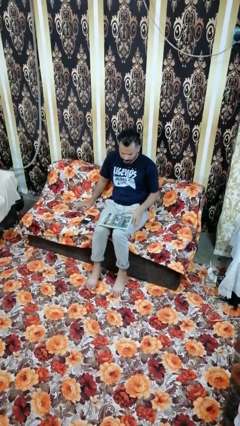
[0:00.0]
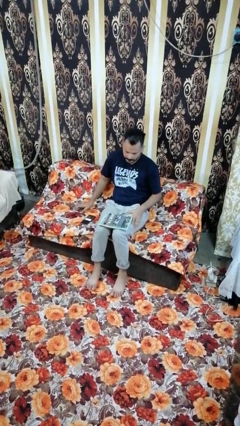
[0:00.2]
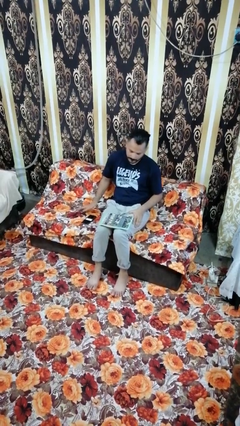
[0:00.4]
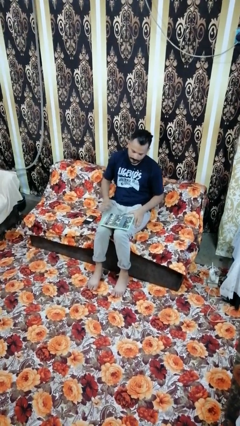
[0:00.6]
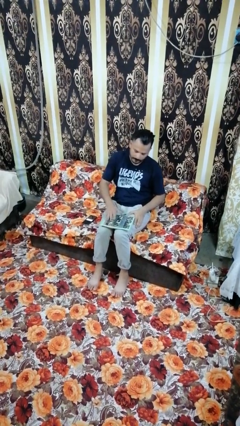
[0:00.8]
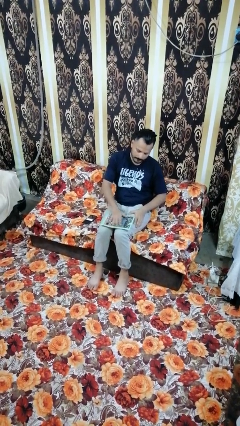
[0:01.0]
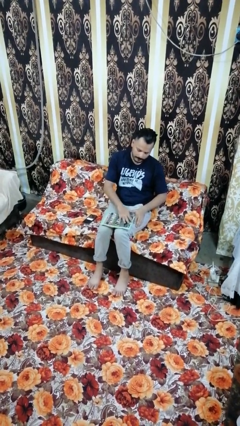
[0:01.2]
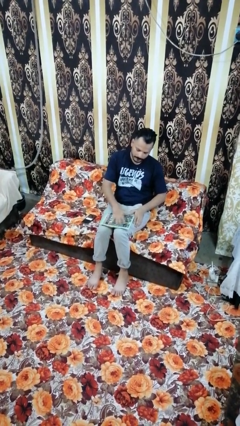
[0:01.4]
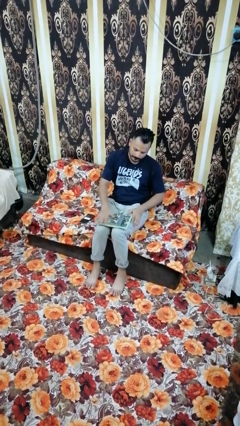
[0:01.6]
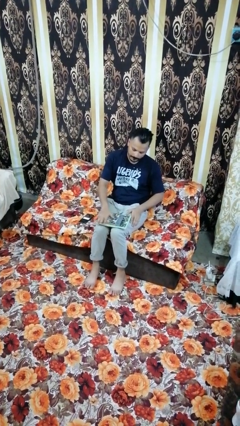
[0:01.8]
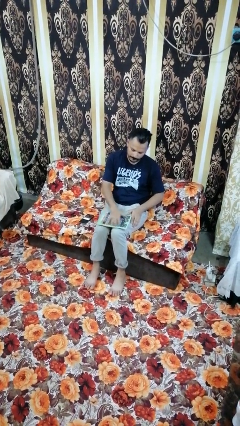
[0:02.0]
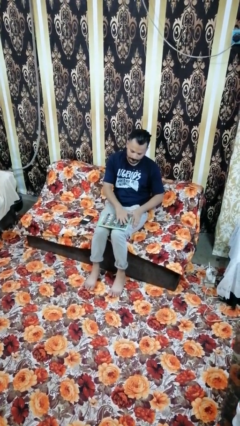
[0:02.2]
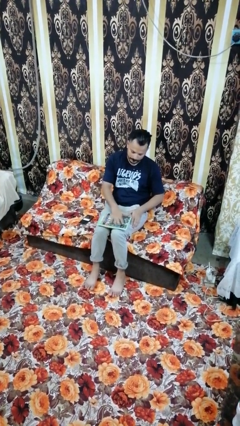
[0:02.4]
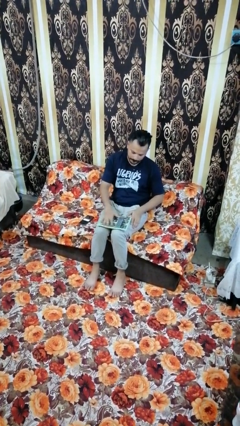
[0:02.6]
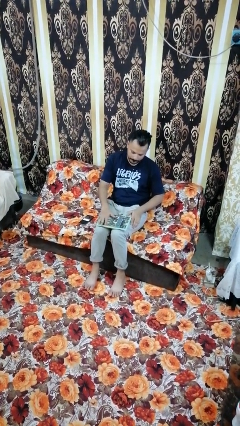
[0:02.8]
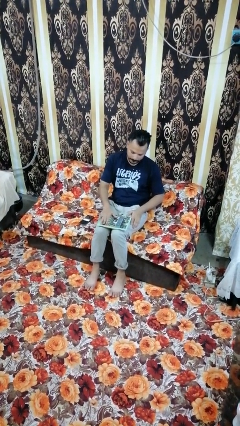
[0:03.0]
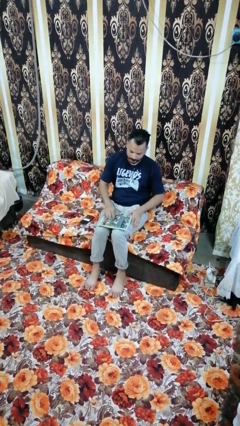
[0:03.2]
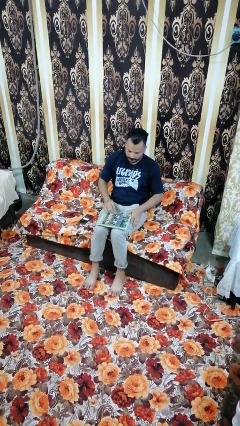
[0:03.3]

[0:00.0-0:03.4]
person waves hand over object

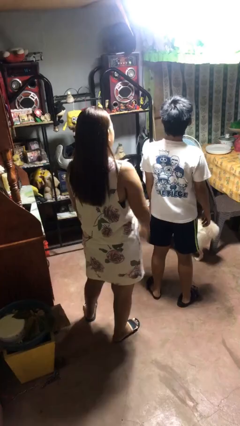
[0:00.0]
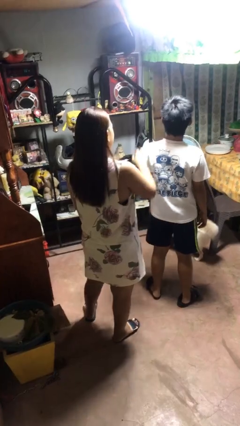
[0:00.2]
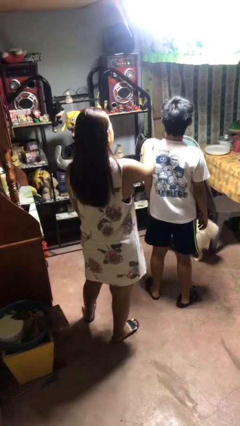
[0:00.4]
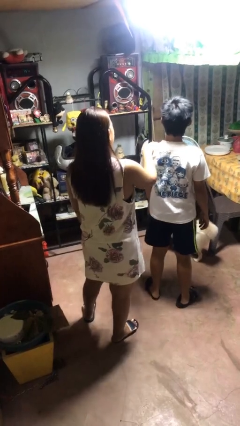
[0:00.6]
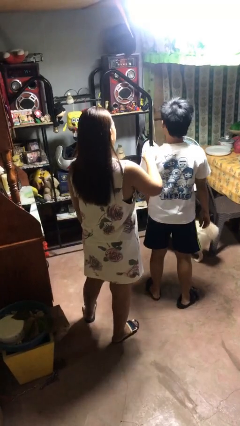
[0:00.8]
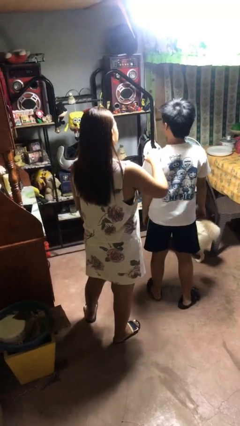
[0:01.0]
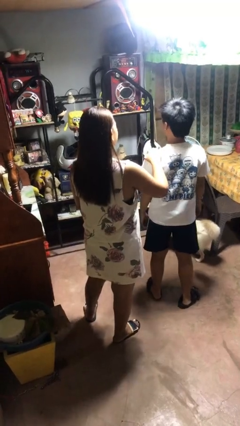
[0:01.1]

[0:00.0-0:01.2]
person grabs person by shoulder

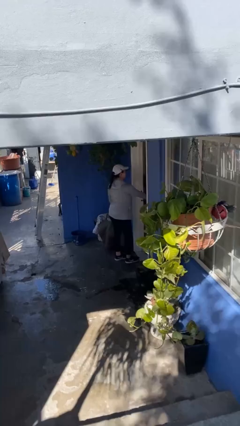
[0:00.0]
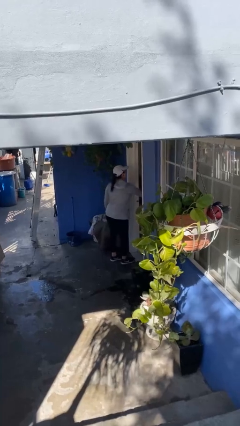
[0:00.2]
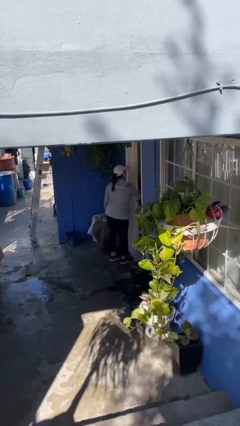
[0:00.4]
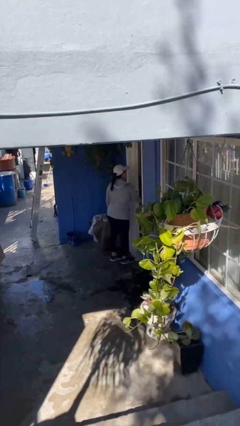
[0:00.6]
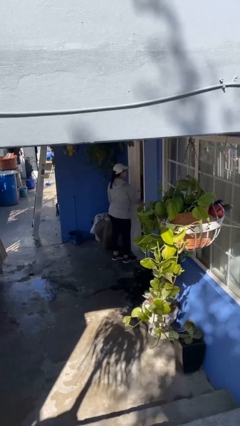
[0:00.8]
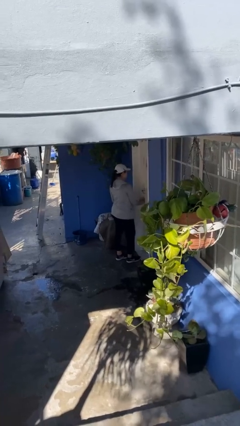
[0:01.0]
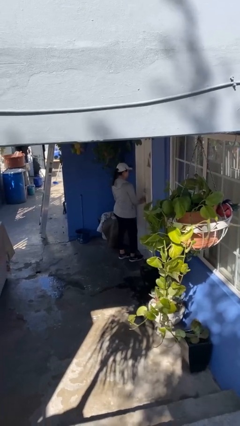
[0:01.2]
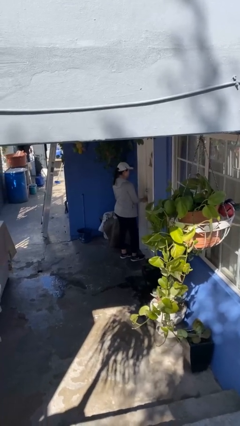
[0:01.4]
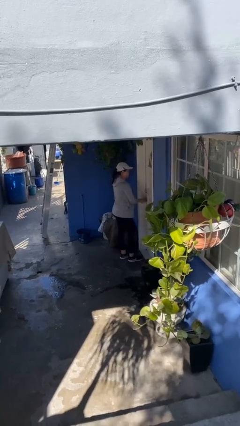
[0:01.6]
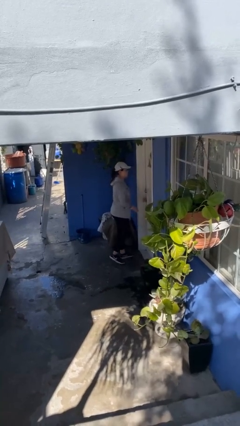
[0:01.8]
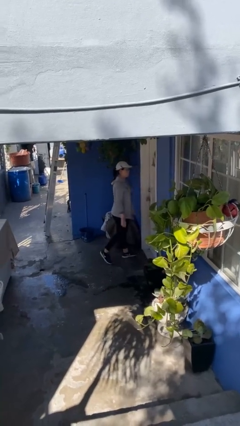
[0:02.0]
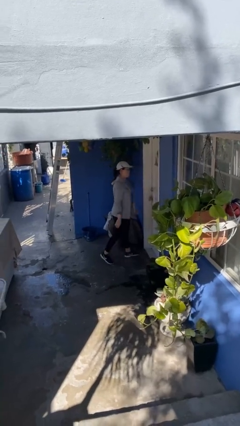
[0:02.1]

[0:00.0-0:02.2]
person closes facility door

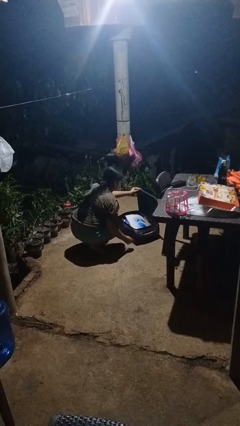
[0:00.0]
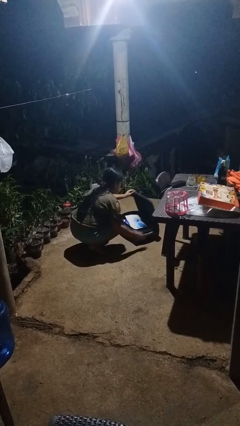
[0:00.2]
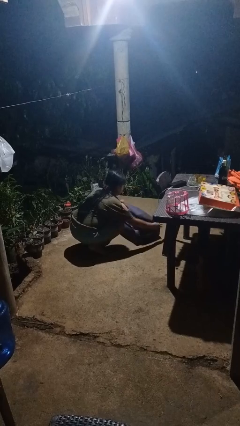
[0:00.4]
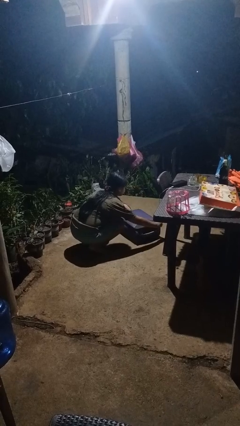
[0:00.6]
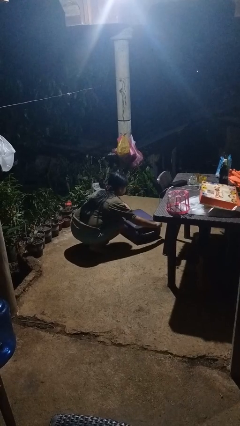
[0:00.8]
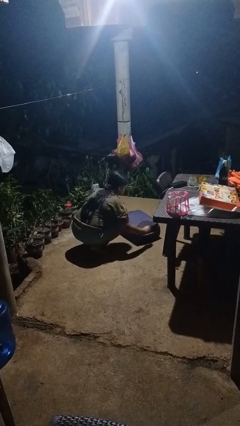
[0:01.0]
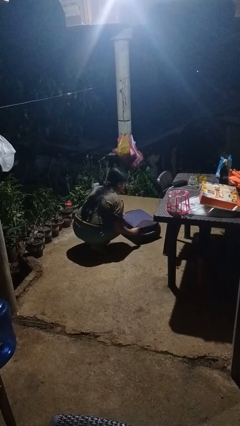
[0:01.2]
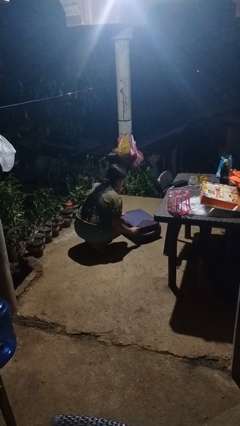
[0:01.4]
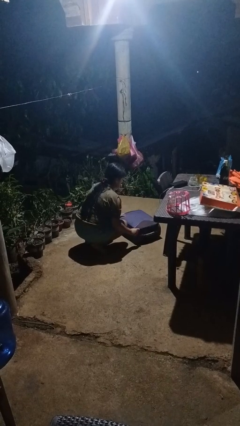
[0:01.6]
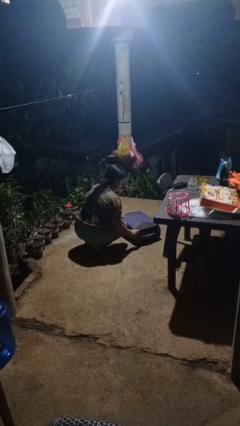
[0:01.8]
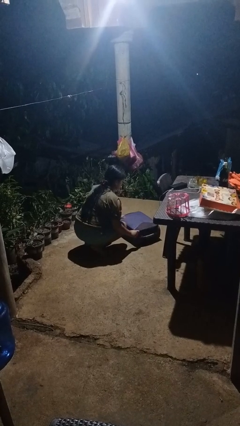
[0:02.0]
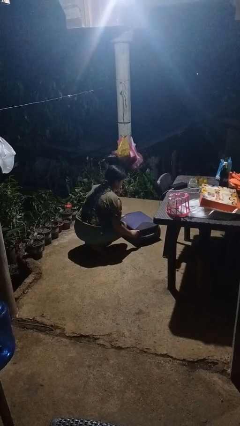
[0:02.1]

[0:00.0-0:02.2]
person closes suitcase

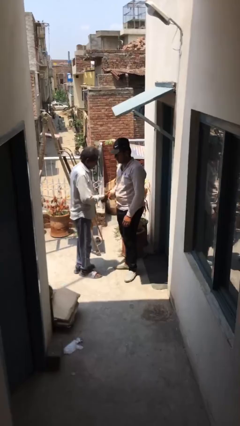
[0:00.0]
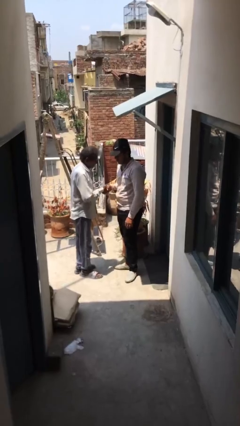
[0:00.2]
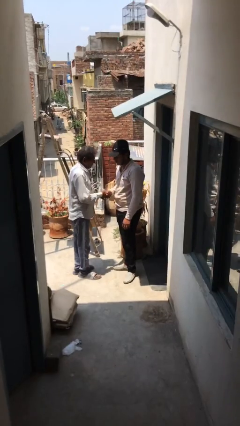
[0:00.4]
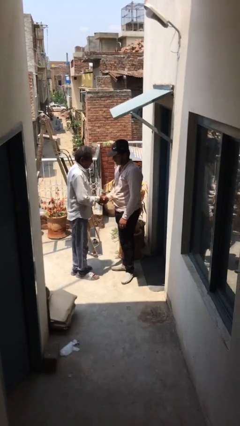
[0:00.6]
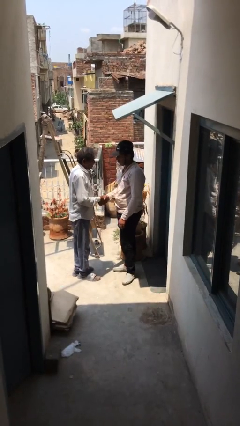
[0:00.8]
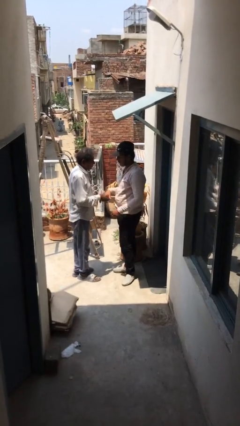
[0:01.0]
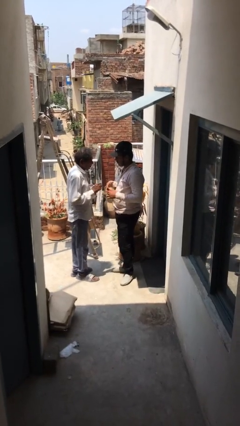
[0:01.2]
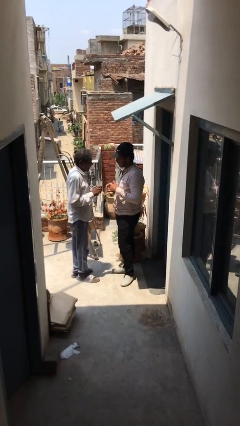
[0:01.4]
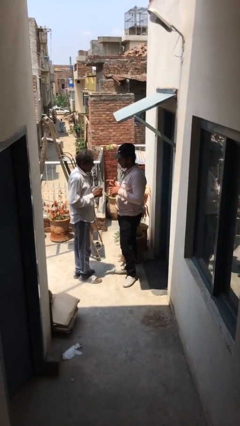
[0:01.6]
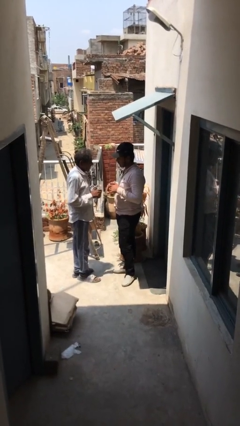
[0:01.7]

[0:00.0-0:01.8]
person shakes hand

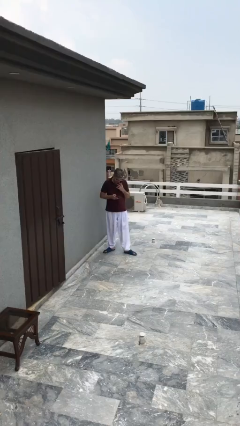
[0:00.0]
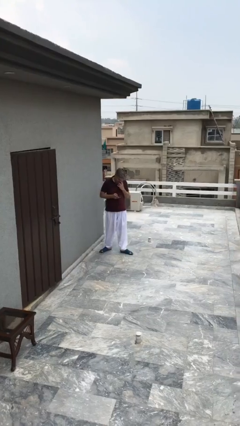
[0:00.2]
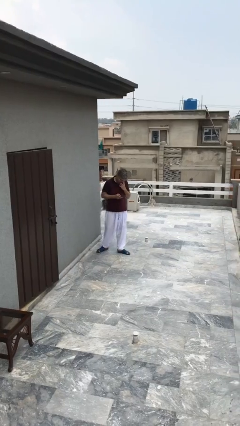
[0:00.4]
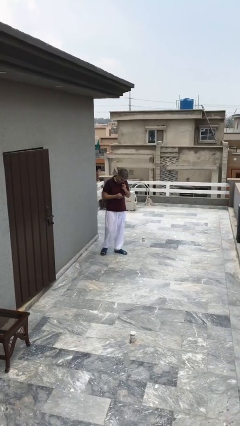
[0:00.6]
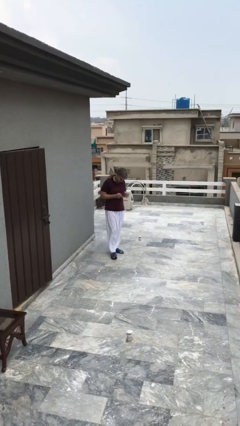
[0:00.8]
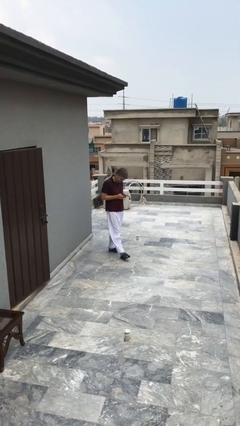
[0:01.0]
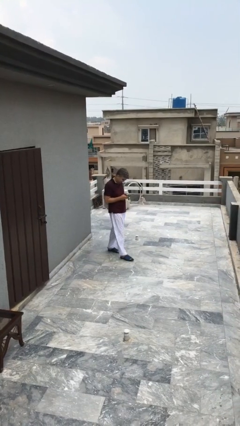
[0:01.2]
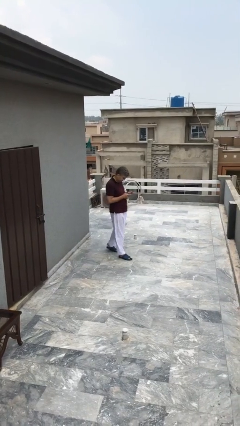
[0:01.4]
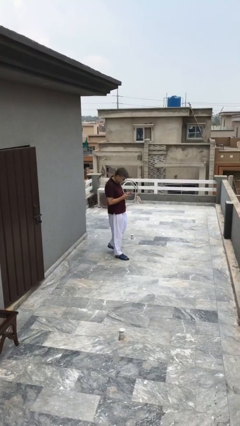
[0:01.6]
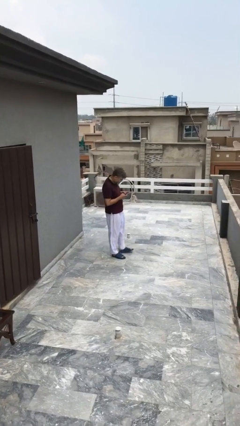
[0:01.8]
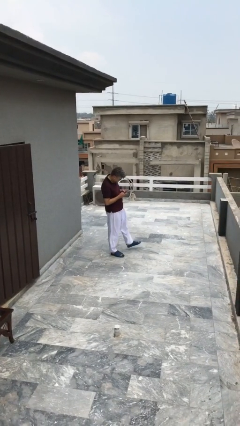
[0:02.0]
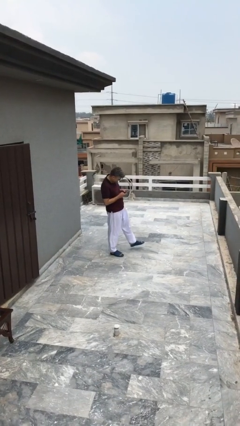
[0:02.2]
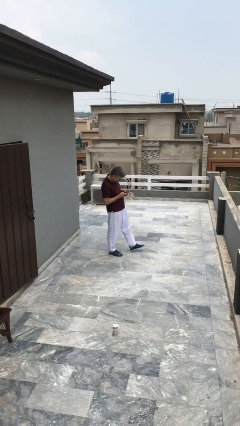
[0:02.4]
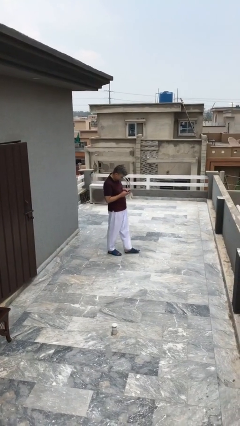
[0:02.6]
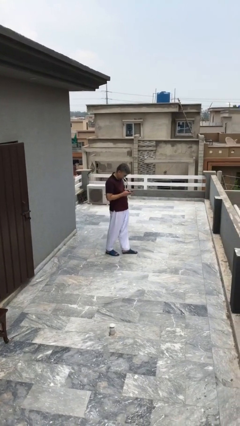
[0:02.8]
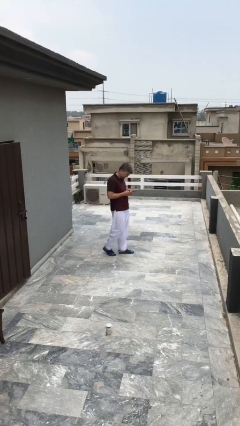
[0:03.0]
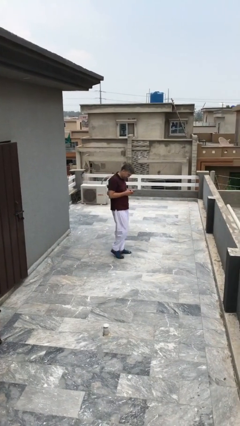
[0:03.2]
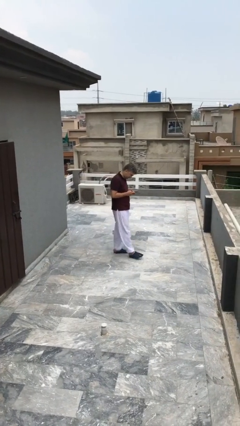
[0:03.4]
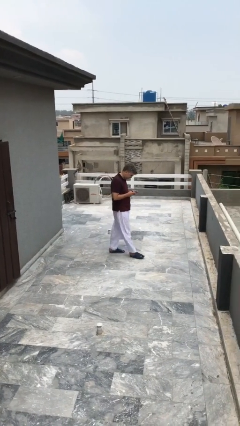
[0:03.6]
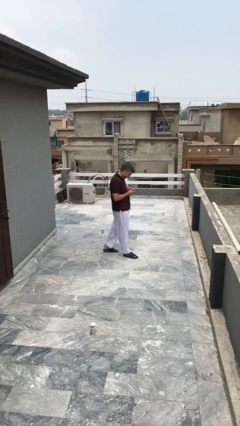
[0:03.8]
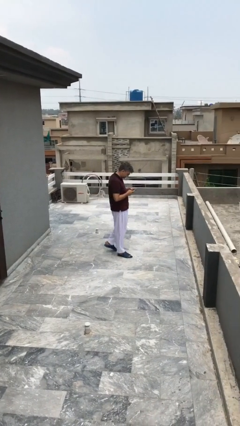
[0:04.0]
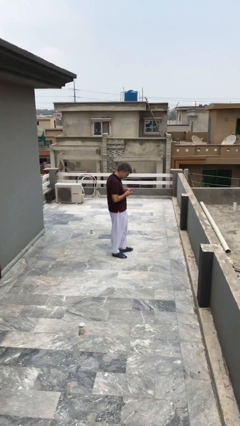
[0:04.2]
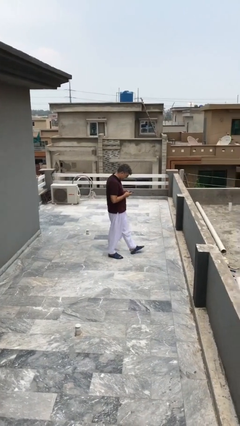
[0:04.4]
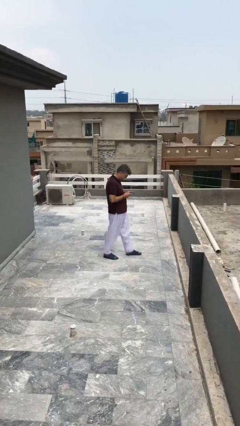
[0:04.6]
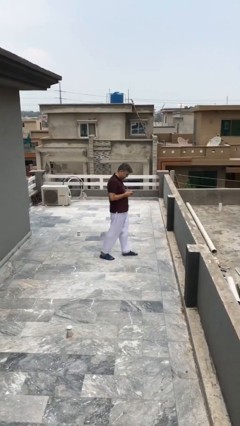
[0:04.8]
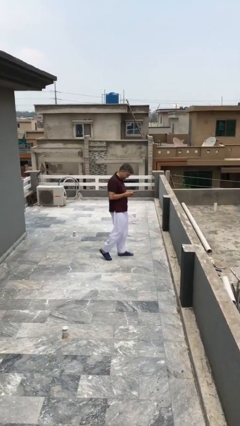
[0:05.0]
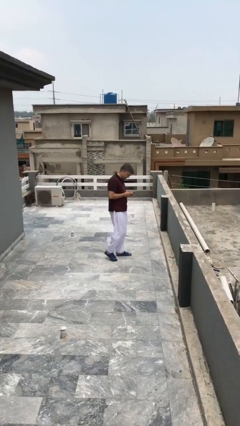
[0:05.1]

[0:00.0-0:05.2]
person texts on phone

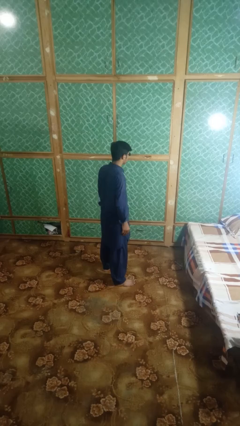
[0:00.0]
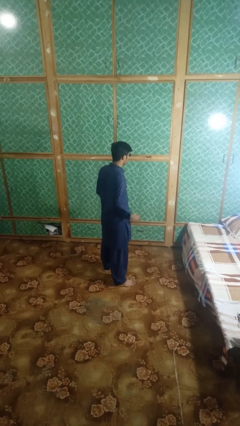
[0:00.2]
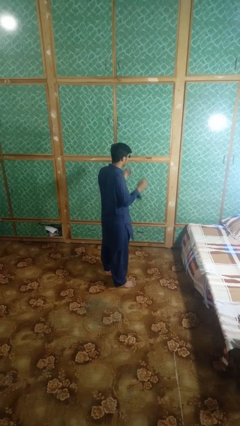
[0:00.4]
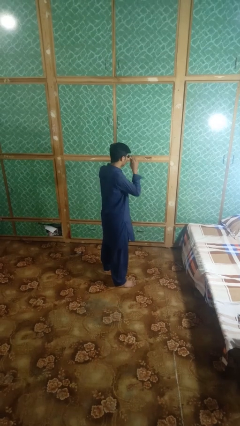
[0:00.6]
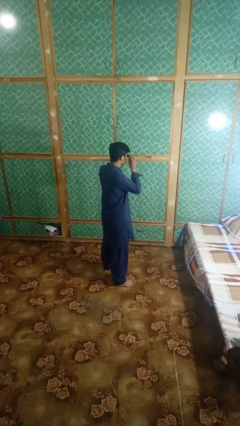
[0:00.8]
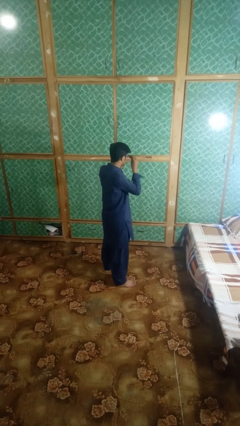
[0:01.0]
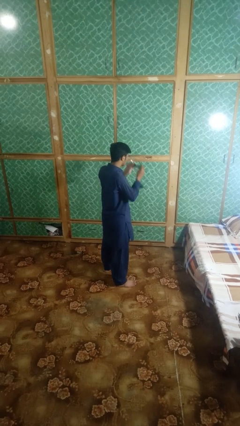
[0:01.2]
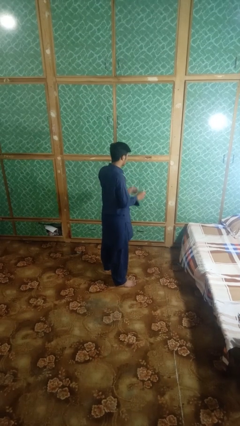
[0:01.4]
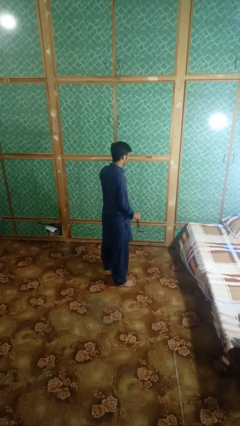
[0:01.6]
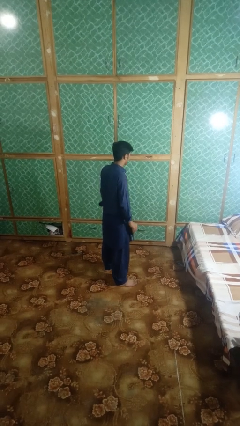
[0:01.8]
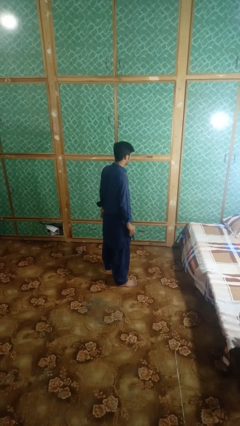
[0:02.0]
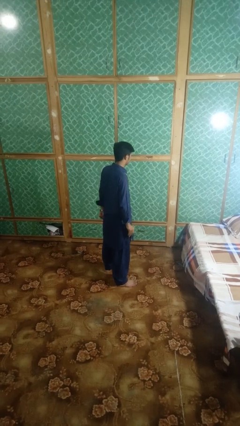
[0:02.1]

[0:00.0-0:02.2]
person takes off sunglasses
